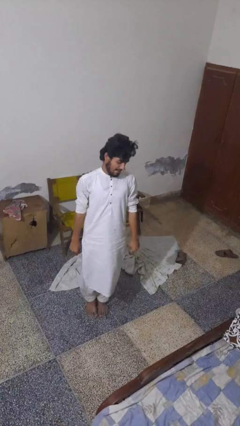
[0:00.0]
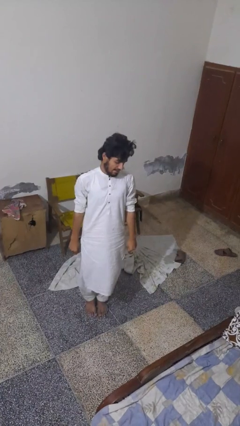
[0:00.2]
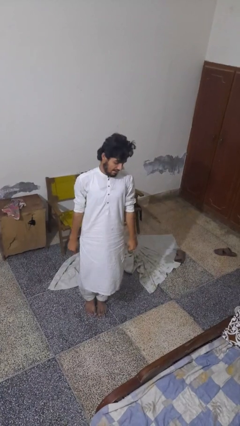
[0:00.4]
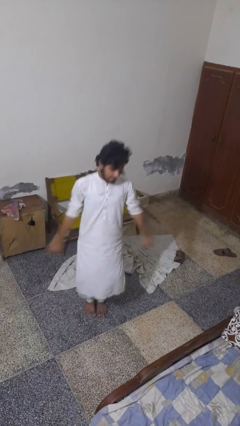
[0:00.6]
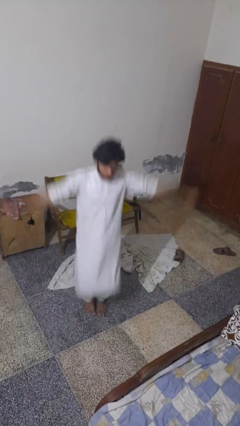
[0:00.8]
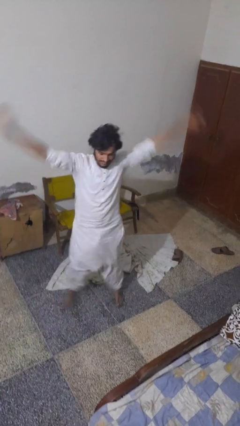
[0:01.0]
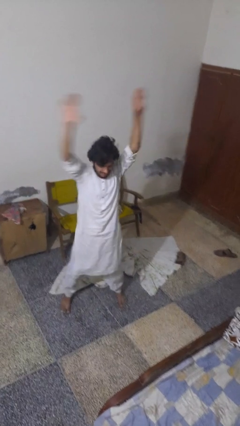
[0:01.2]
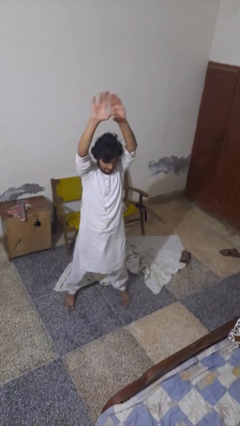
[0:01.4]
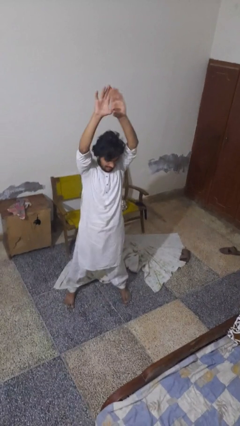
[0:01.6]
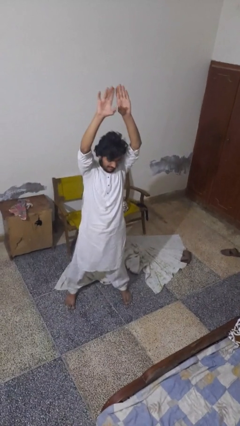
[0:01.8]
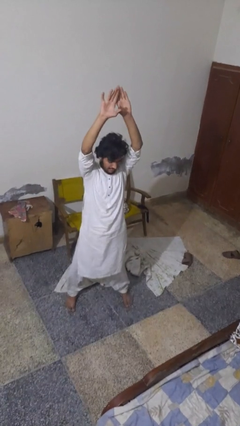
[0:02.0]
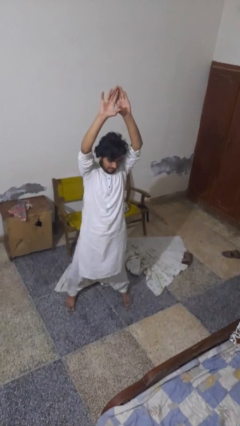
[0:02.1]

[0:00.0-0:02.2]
person exercises with jumping jacks

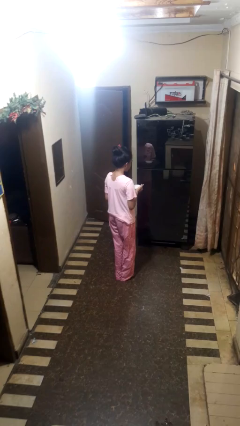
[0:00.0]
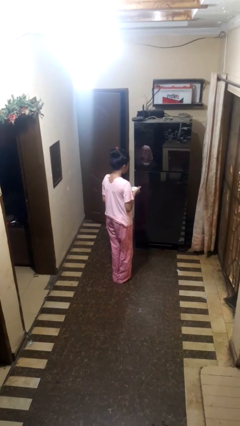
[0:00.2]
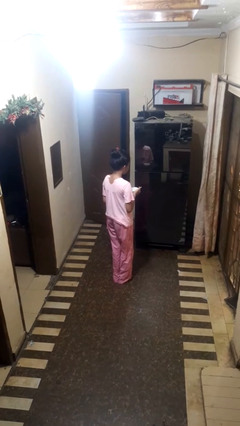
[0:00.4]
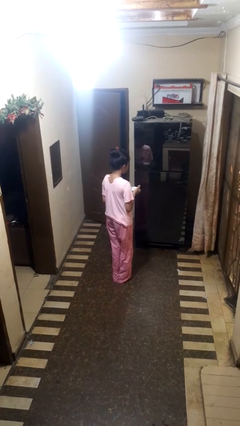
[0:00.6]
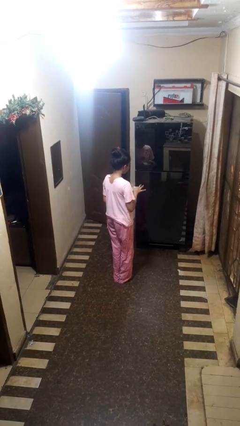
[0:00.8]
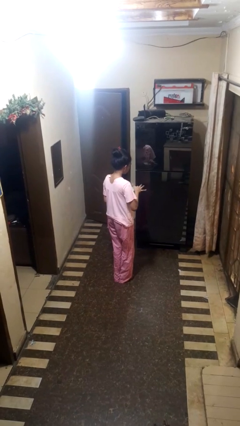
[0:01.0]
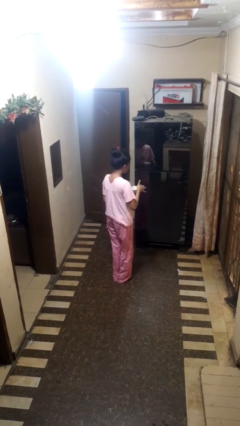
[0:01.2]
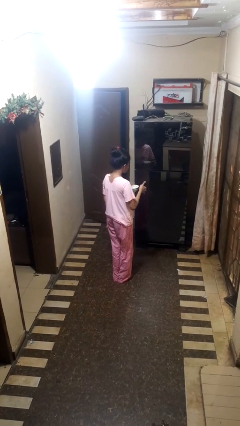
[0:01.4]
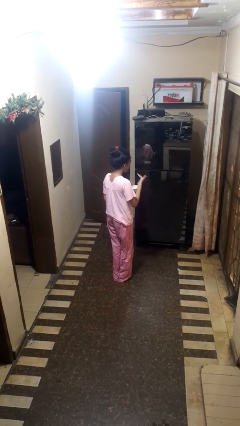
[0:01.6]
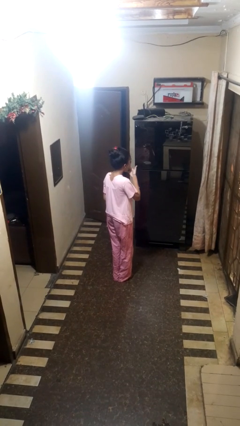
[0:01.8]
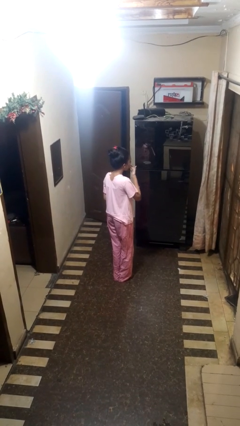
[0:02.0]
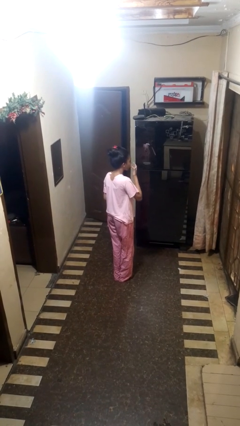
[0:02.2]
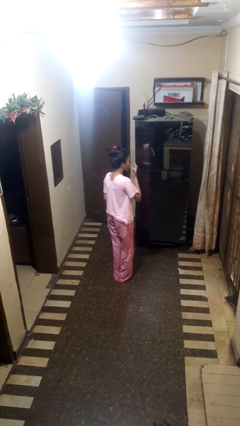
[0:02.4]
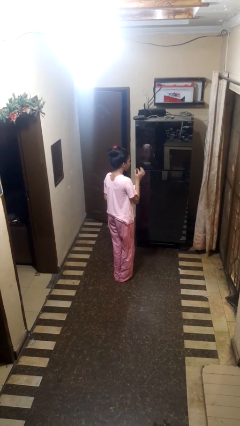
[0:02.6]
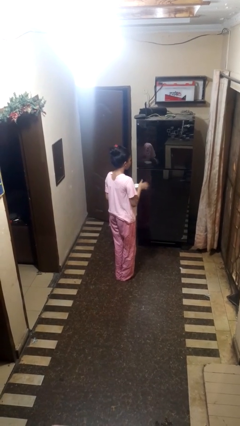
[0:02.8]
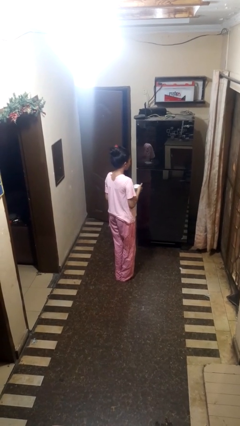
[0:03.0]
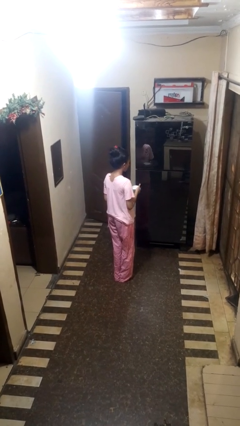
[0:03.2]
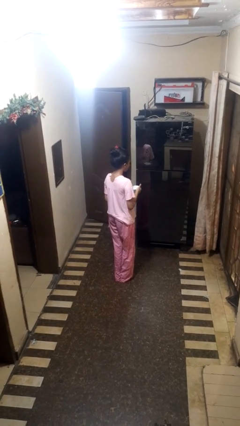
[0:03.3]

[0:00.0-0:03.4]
person licks fingers

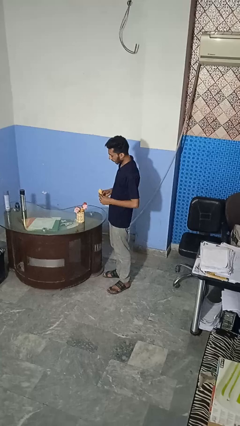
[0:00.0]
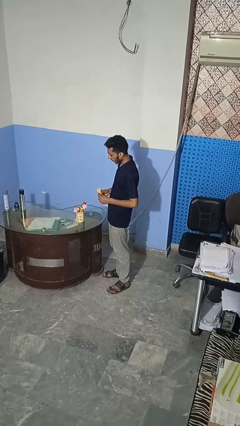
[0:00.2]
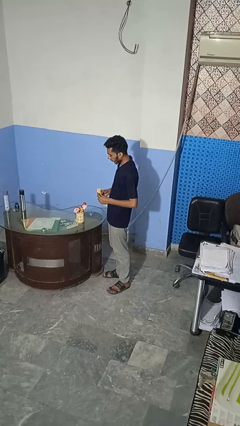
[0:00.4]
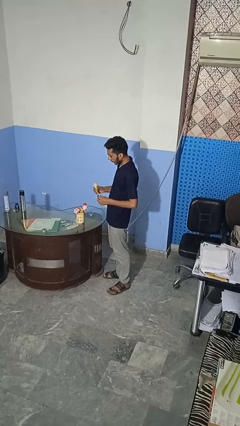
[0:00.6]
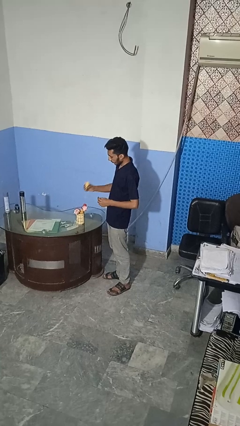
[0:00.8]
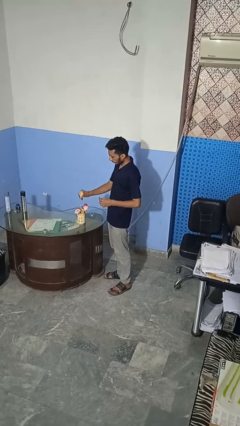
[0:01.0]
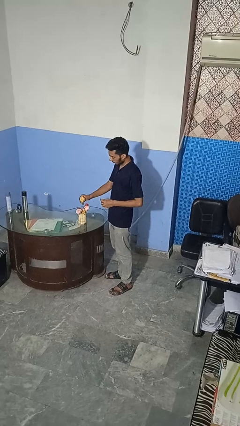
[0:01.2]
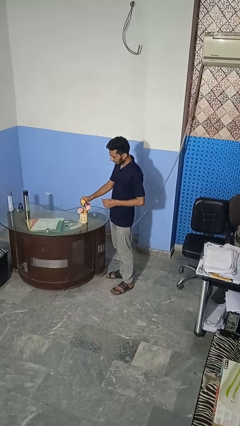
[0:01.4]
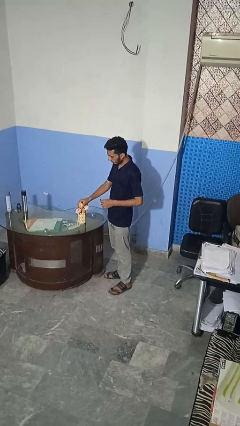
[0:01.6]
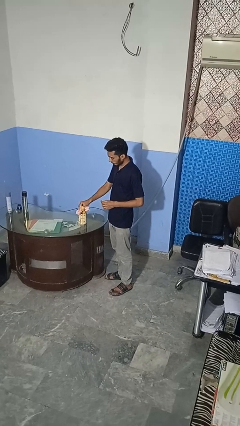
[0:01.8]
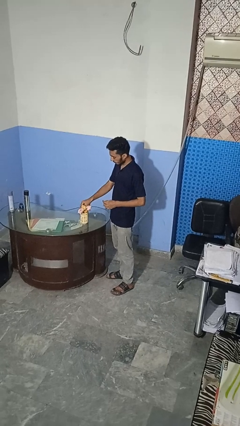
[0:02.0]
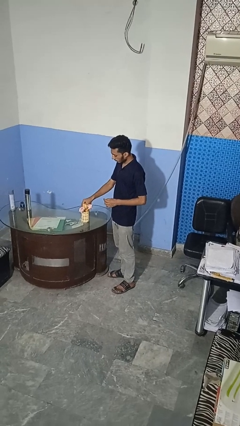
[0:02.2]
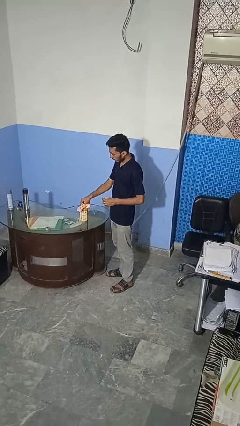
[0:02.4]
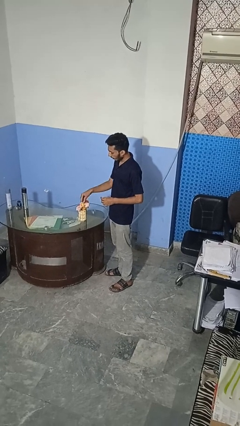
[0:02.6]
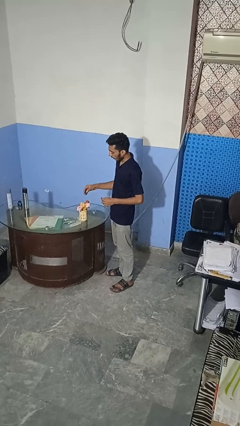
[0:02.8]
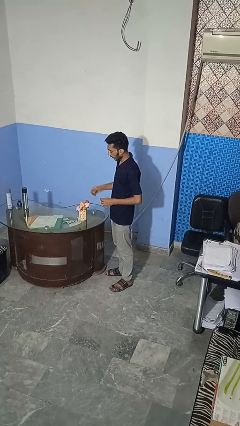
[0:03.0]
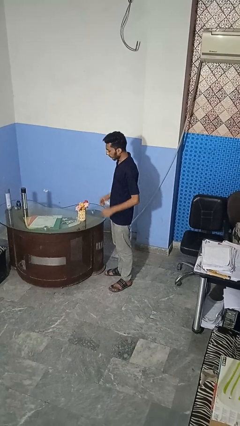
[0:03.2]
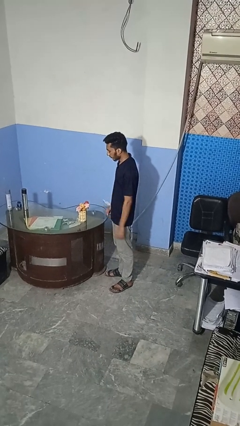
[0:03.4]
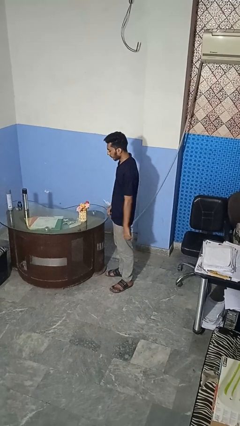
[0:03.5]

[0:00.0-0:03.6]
person arranges flowers in vase

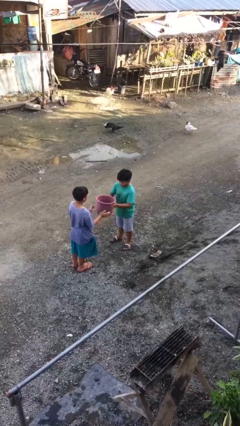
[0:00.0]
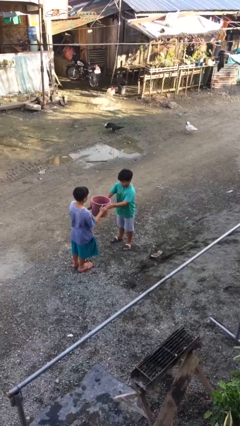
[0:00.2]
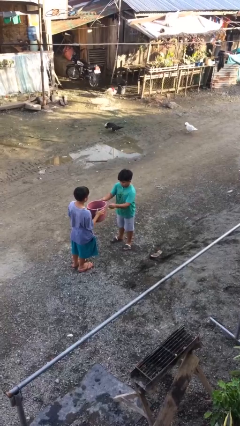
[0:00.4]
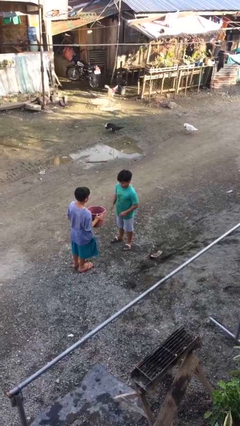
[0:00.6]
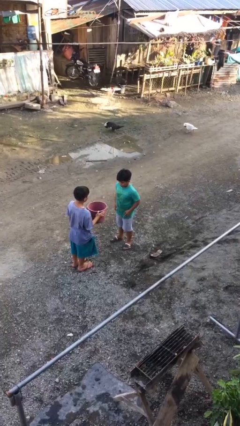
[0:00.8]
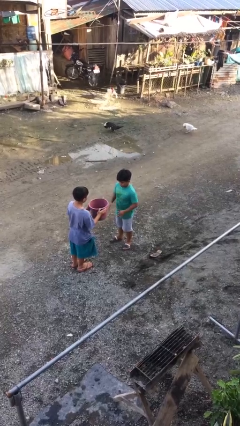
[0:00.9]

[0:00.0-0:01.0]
person transfers object to person

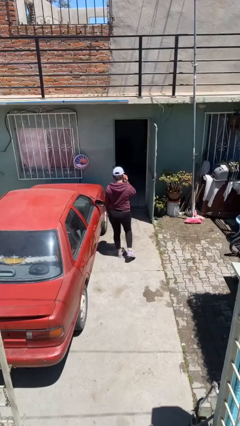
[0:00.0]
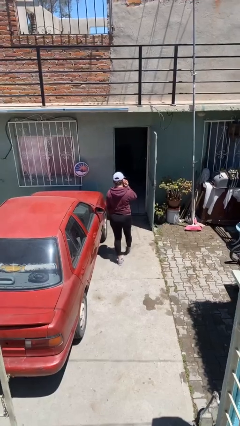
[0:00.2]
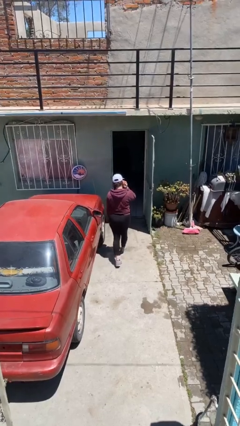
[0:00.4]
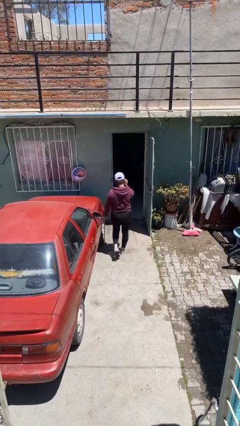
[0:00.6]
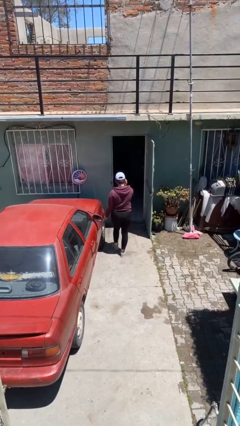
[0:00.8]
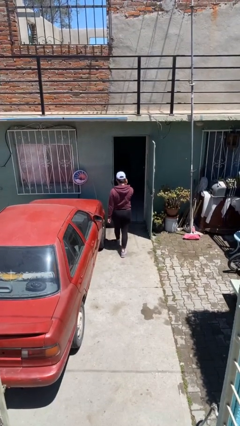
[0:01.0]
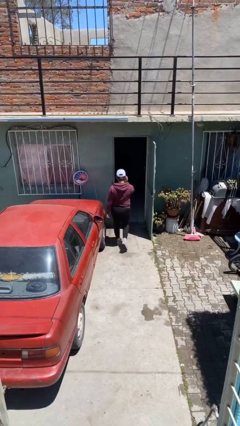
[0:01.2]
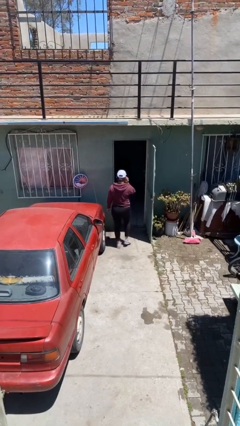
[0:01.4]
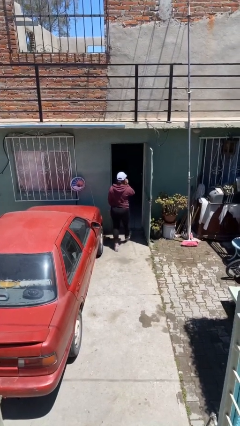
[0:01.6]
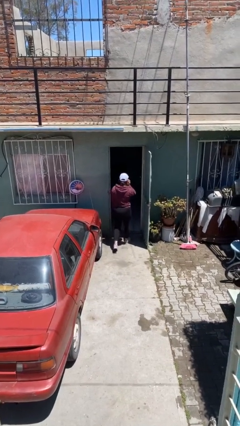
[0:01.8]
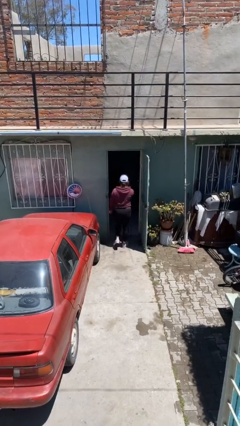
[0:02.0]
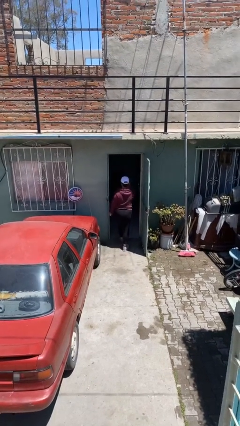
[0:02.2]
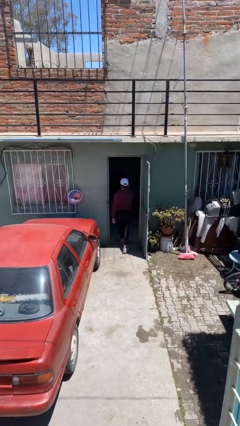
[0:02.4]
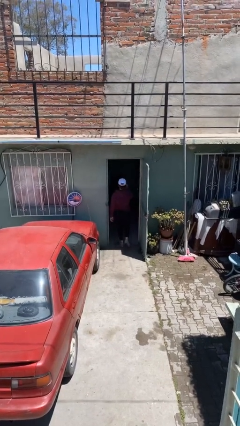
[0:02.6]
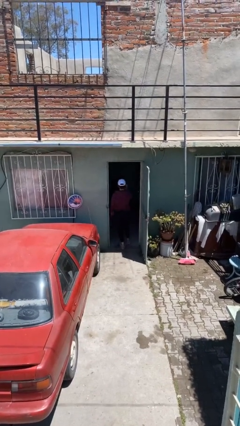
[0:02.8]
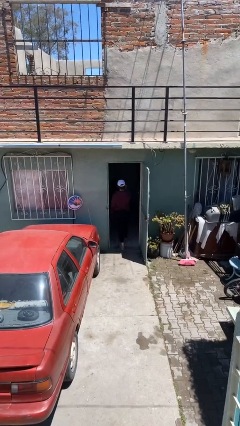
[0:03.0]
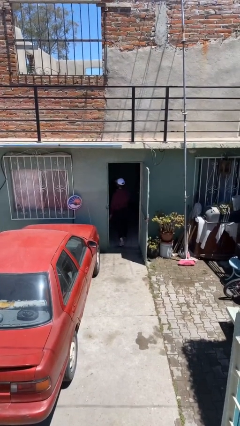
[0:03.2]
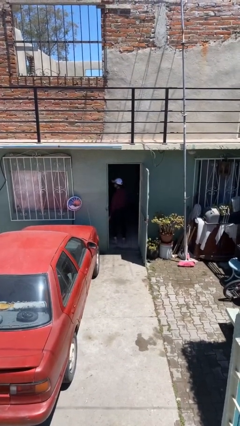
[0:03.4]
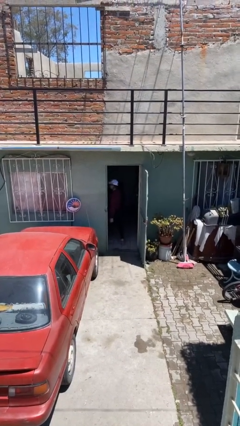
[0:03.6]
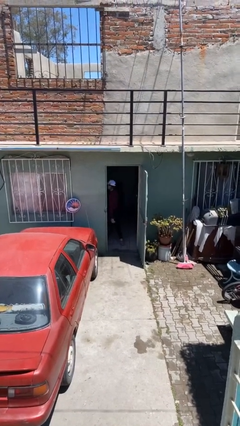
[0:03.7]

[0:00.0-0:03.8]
person exits scene through structure

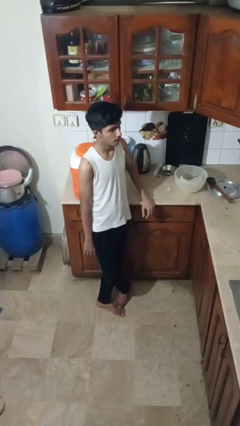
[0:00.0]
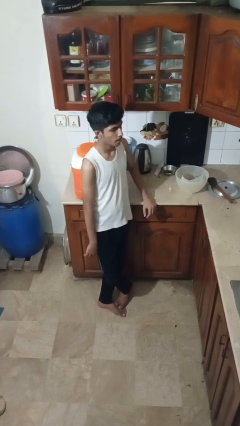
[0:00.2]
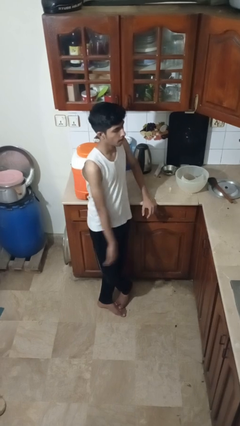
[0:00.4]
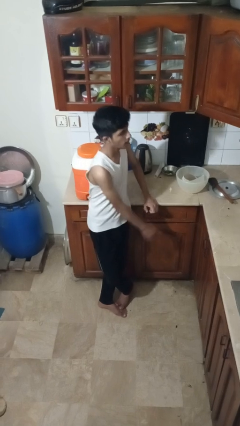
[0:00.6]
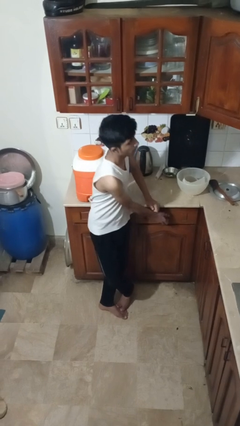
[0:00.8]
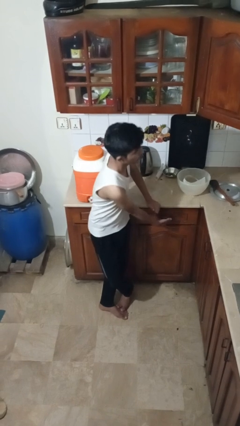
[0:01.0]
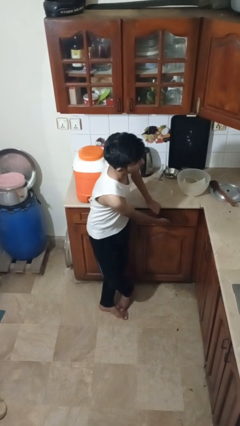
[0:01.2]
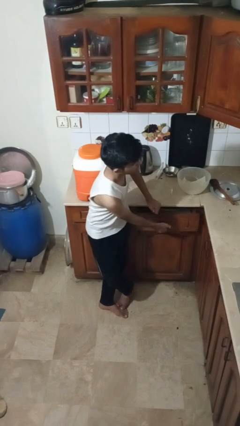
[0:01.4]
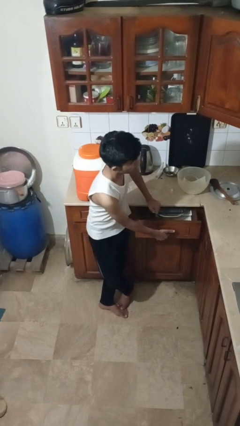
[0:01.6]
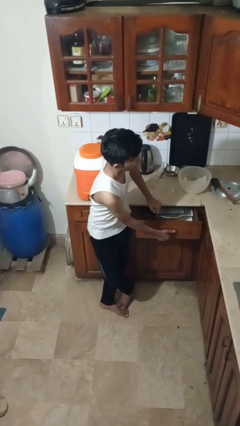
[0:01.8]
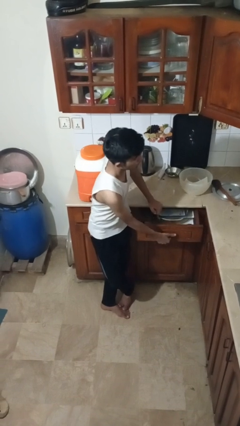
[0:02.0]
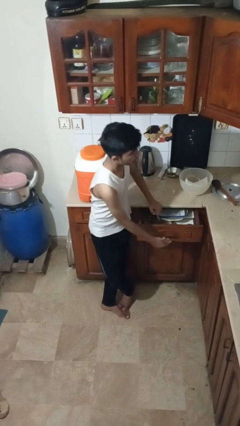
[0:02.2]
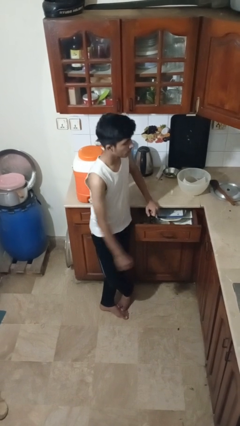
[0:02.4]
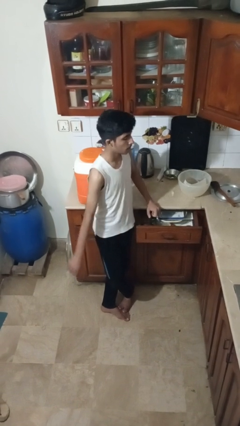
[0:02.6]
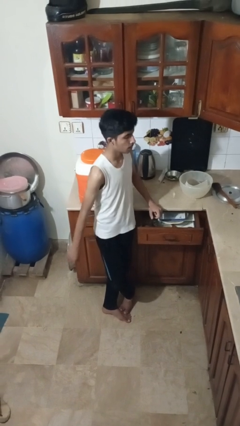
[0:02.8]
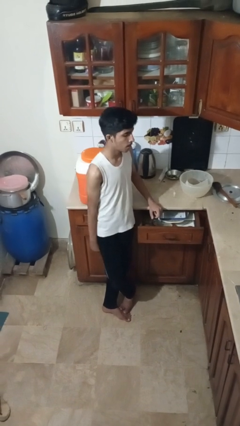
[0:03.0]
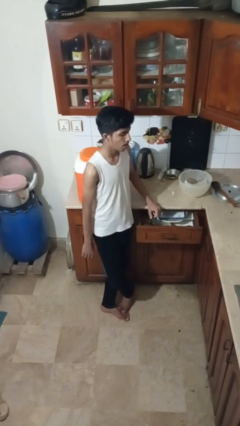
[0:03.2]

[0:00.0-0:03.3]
person opens kitchen drawer

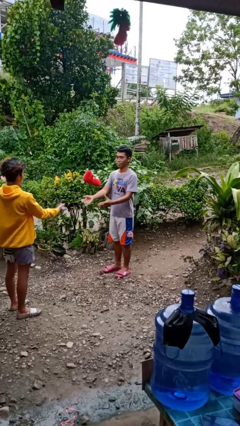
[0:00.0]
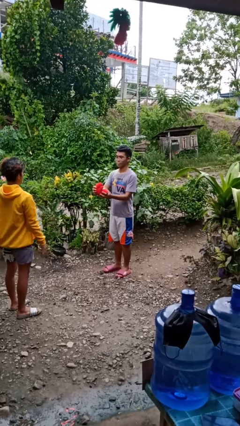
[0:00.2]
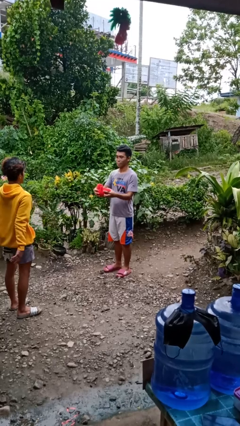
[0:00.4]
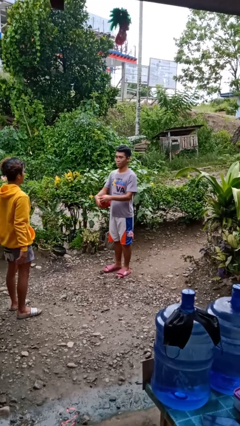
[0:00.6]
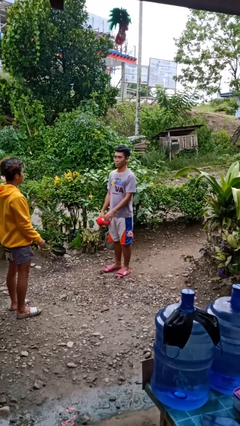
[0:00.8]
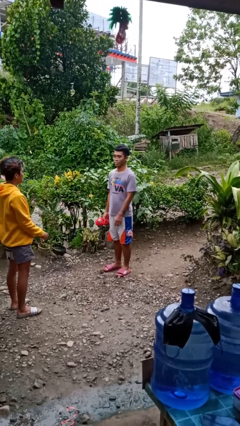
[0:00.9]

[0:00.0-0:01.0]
person catches object from person
